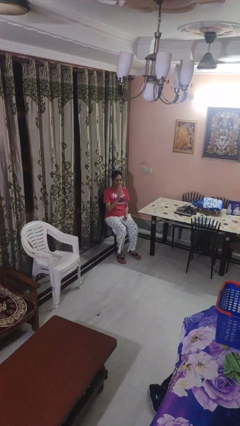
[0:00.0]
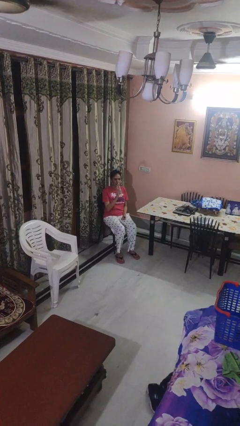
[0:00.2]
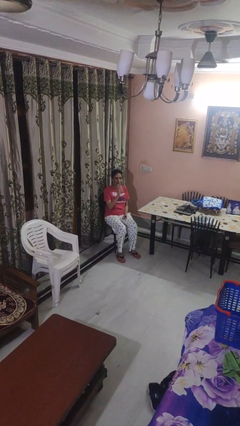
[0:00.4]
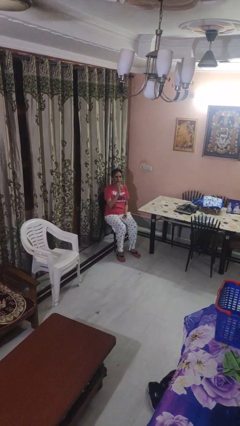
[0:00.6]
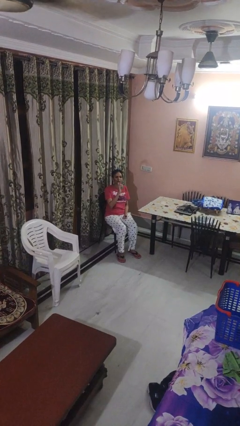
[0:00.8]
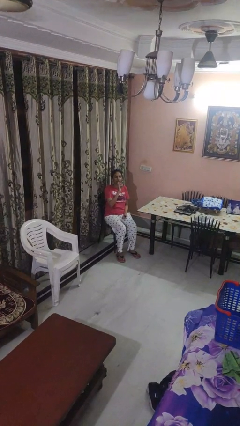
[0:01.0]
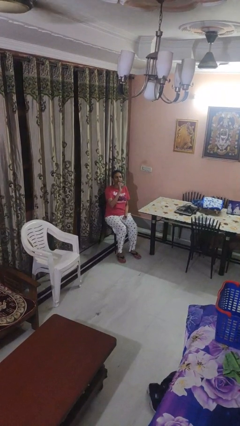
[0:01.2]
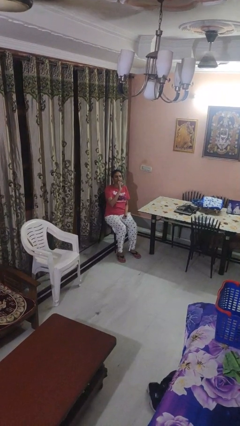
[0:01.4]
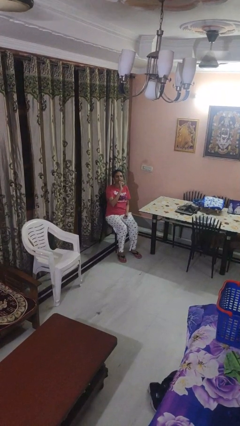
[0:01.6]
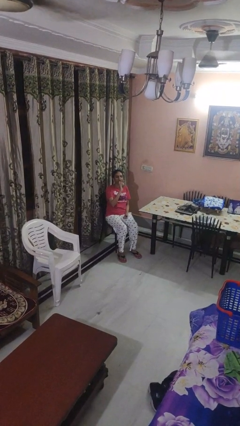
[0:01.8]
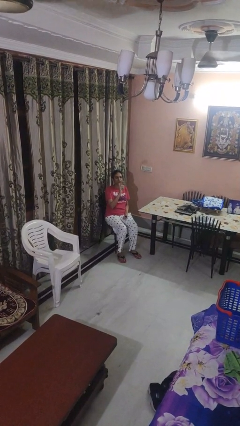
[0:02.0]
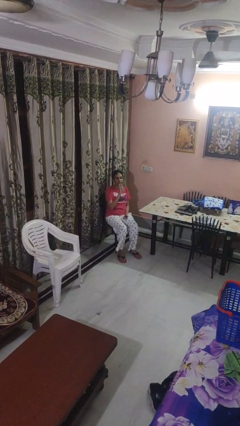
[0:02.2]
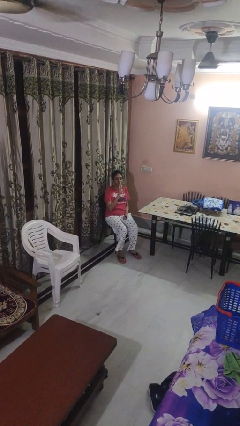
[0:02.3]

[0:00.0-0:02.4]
person drinks from bottle

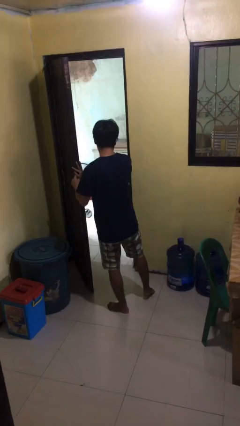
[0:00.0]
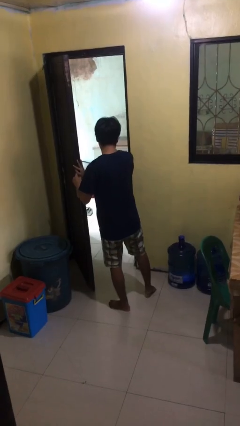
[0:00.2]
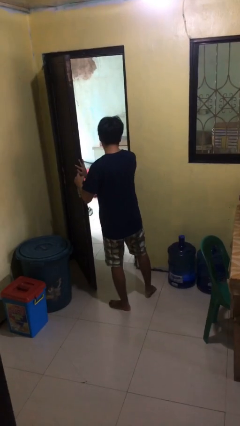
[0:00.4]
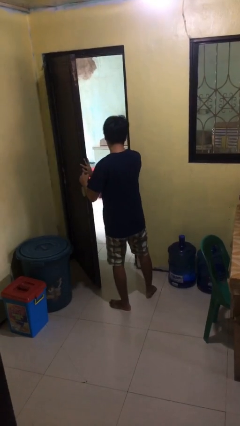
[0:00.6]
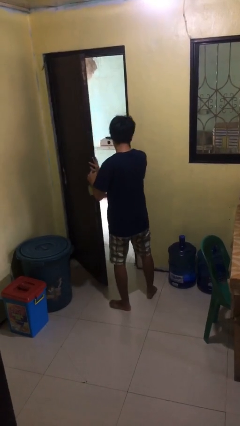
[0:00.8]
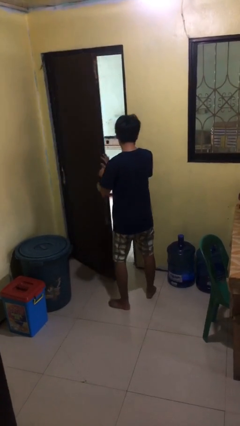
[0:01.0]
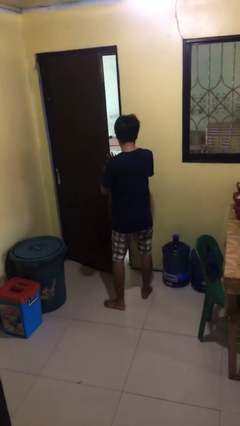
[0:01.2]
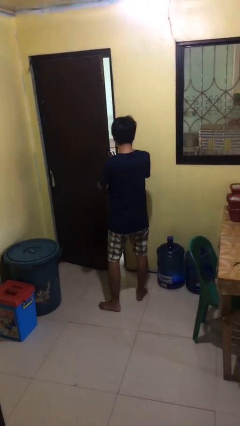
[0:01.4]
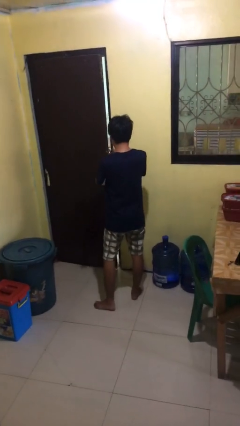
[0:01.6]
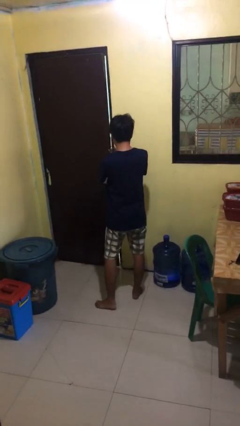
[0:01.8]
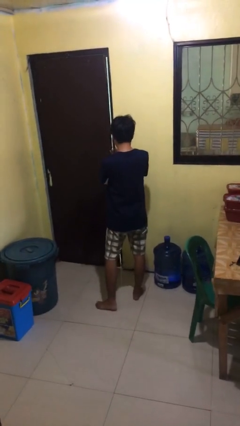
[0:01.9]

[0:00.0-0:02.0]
person closes facility door

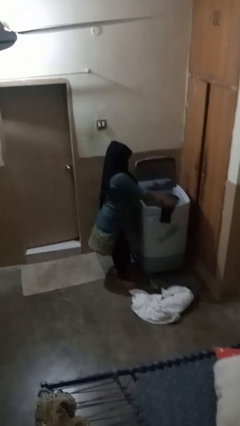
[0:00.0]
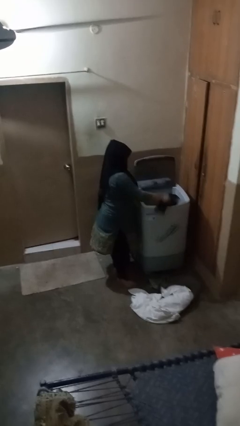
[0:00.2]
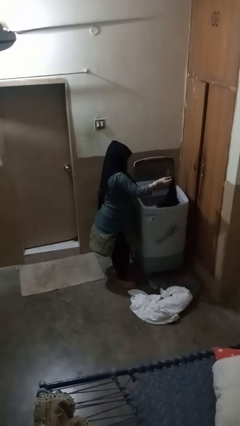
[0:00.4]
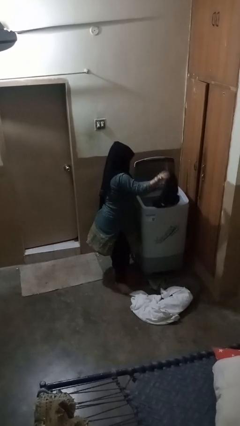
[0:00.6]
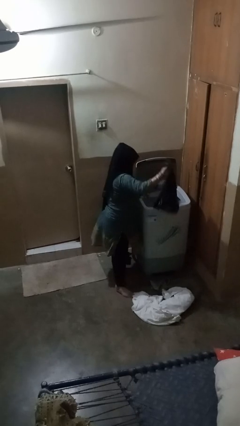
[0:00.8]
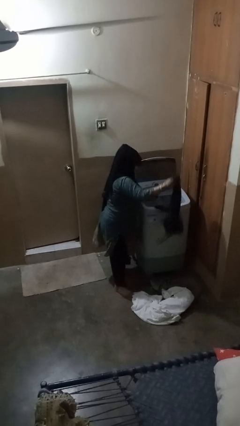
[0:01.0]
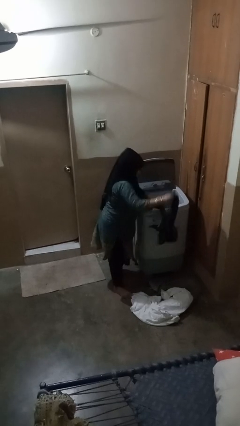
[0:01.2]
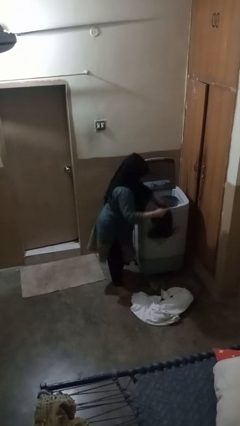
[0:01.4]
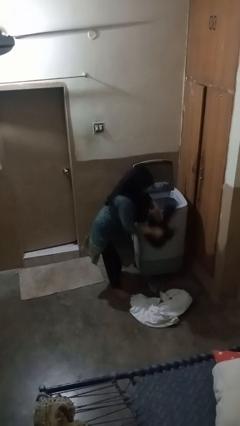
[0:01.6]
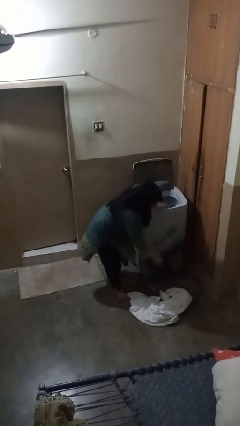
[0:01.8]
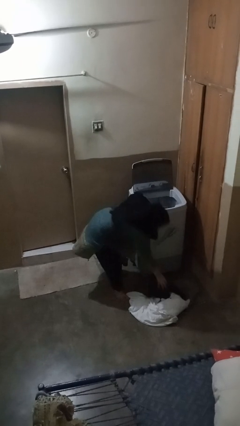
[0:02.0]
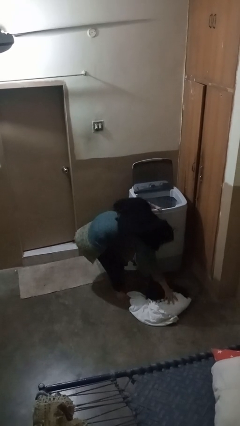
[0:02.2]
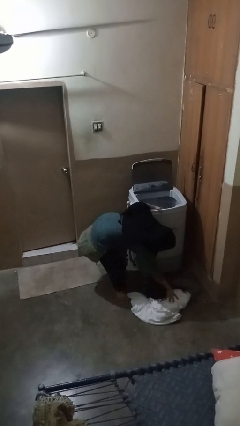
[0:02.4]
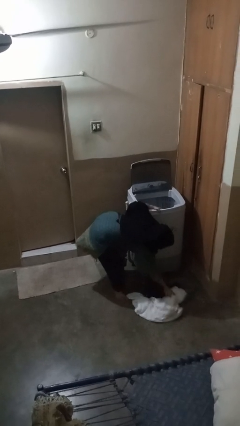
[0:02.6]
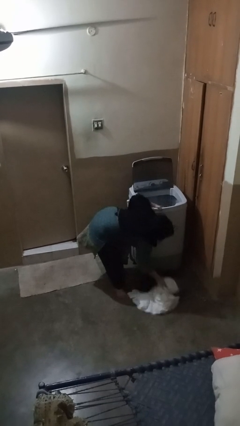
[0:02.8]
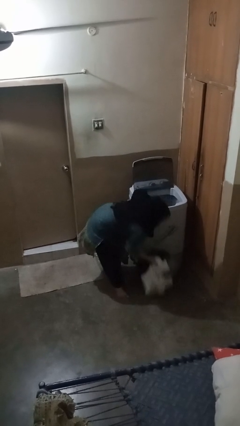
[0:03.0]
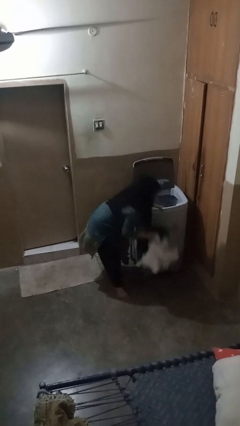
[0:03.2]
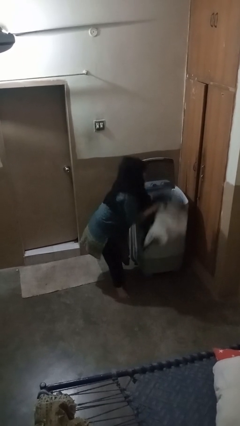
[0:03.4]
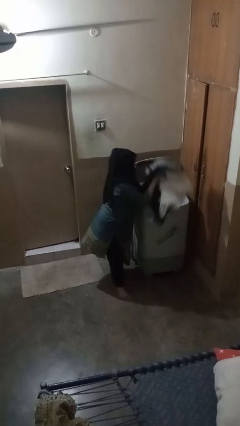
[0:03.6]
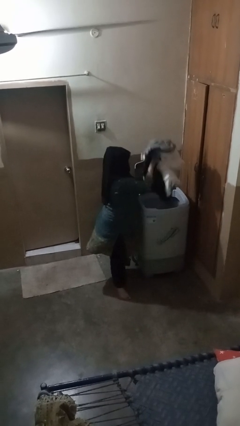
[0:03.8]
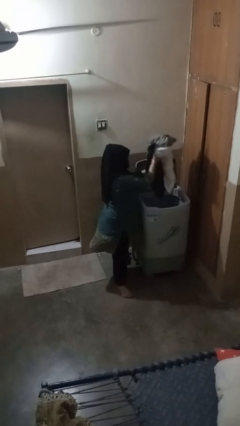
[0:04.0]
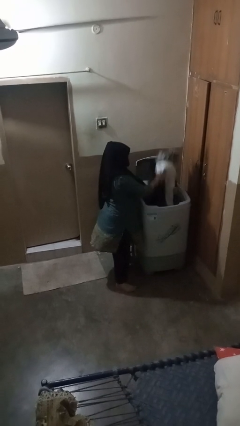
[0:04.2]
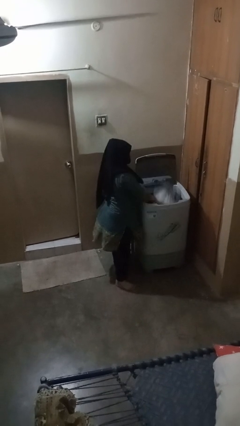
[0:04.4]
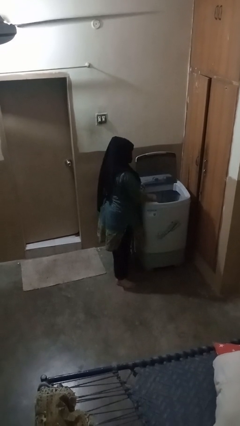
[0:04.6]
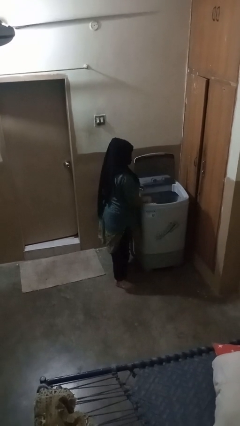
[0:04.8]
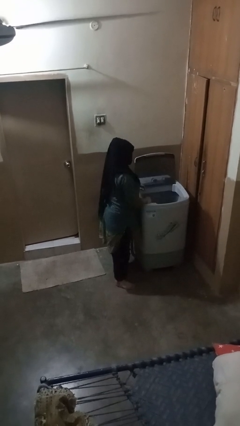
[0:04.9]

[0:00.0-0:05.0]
person loads clotheswasher

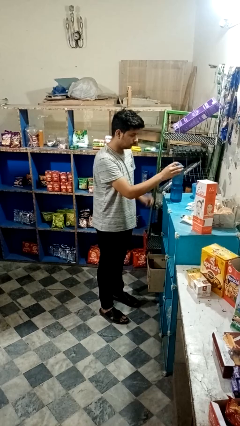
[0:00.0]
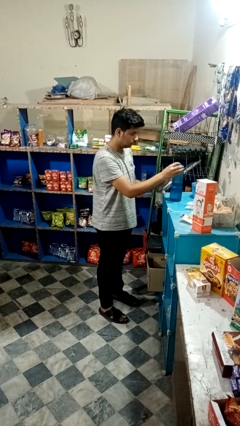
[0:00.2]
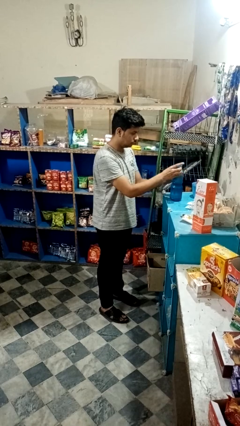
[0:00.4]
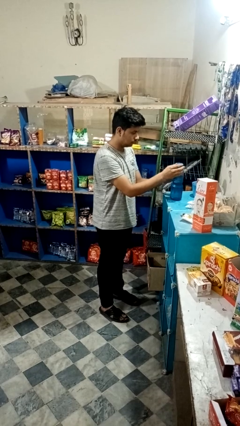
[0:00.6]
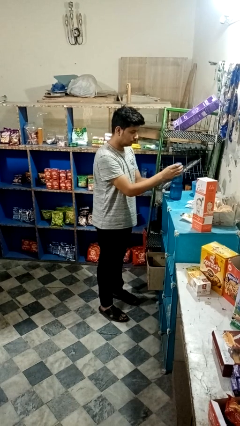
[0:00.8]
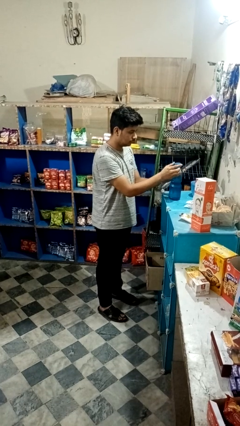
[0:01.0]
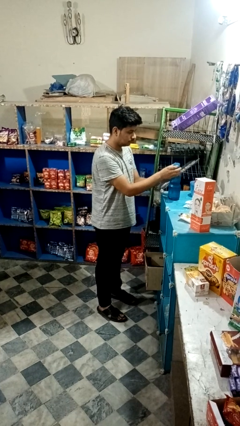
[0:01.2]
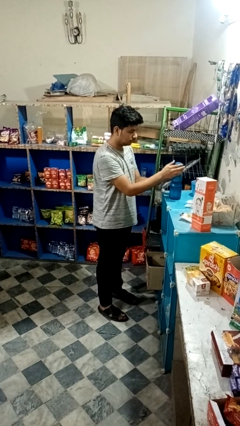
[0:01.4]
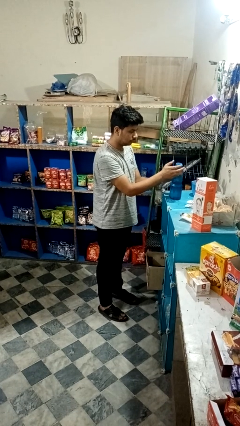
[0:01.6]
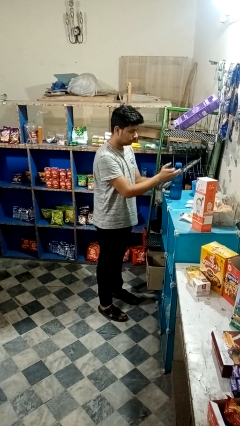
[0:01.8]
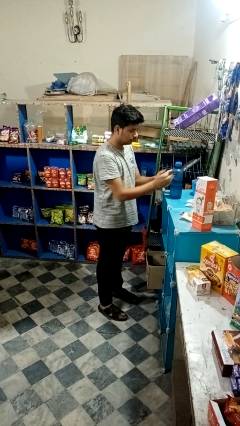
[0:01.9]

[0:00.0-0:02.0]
person screws lid to bottle

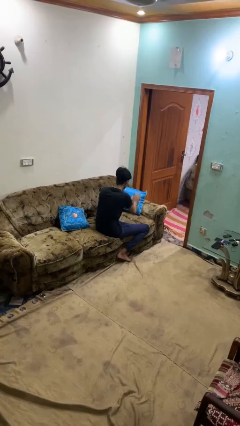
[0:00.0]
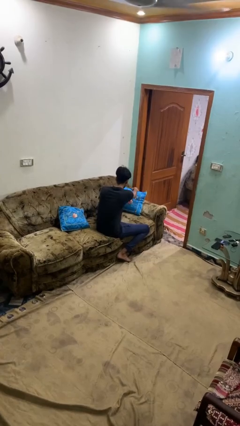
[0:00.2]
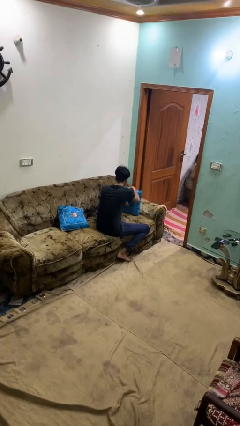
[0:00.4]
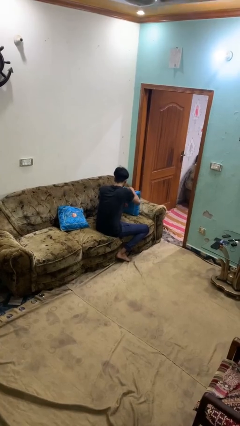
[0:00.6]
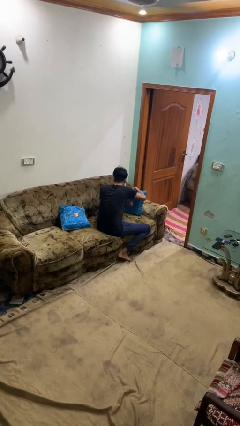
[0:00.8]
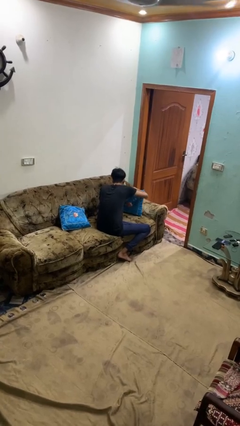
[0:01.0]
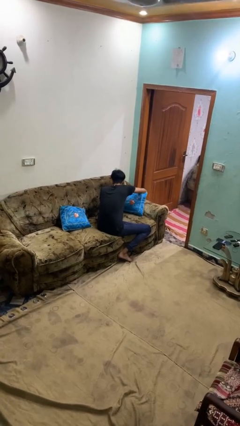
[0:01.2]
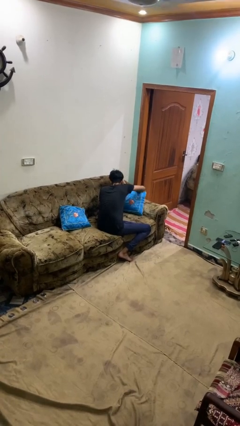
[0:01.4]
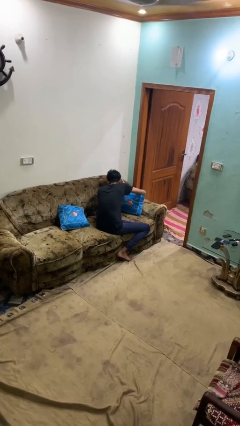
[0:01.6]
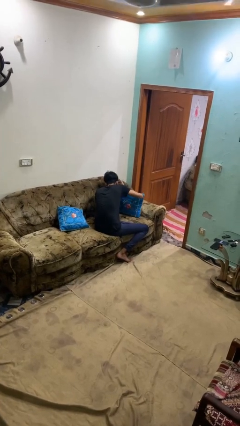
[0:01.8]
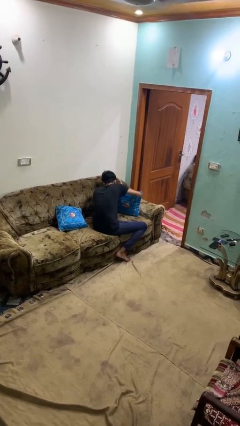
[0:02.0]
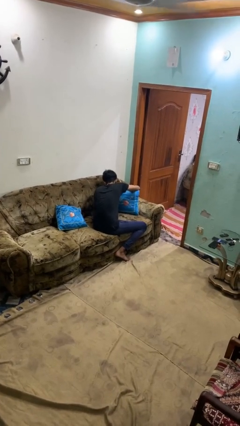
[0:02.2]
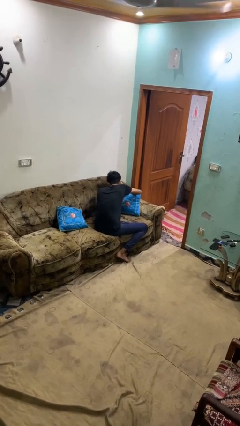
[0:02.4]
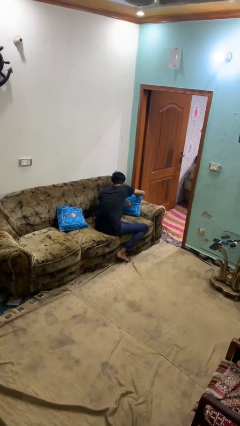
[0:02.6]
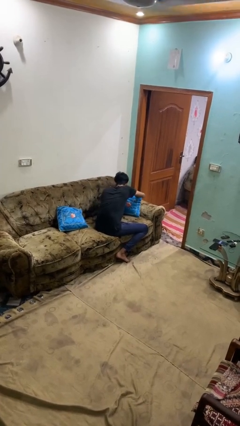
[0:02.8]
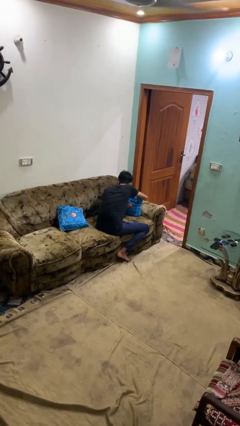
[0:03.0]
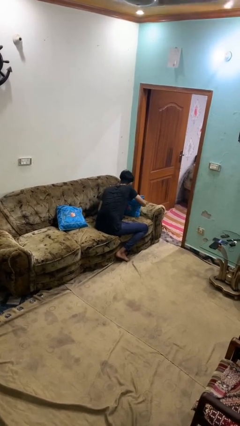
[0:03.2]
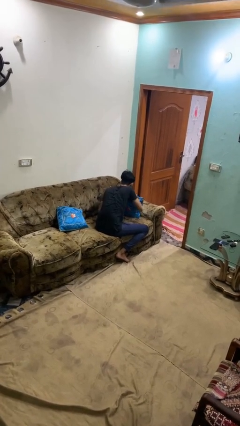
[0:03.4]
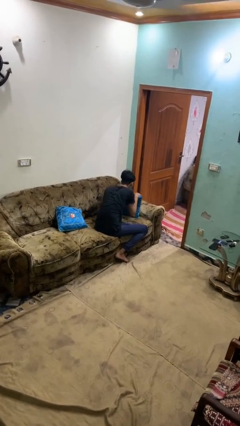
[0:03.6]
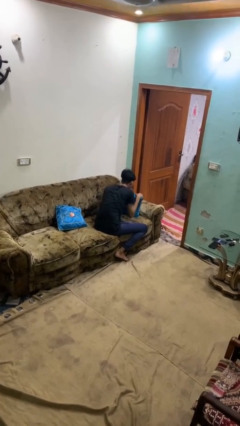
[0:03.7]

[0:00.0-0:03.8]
person searches in couch

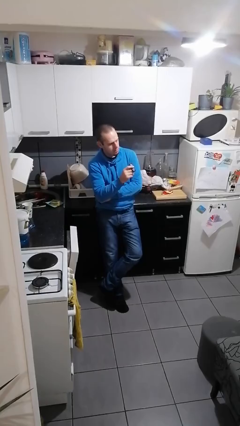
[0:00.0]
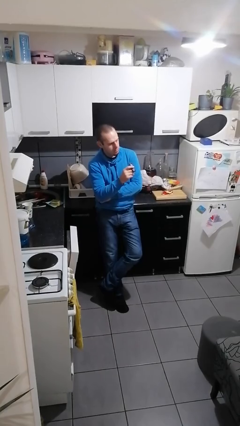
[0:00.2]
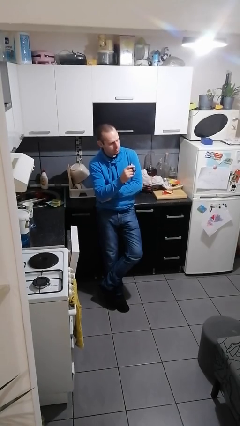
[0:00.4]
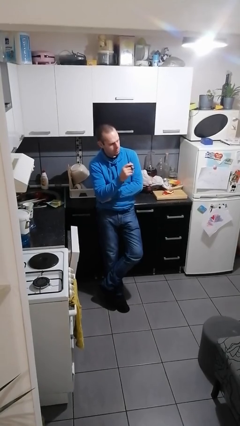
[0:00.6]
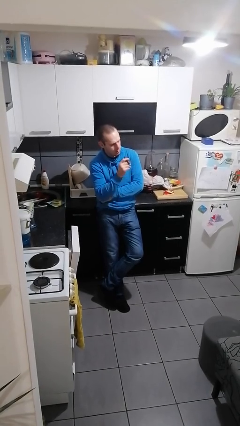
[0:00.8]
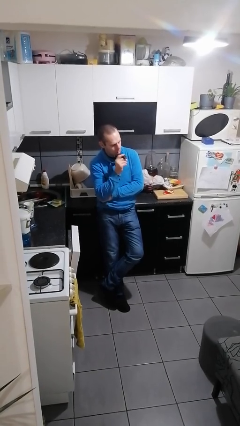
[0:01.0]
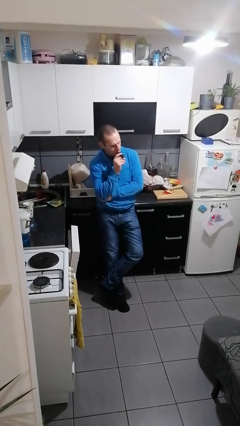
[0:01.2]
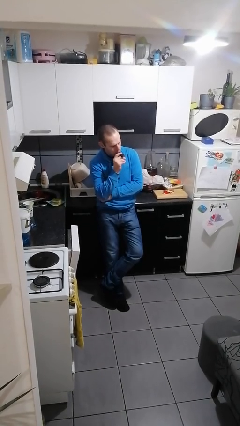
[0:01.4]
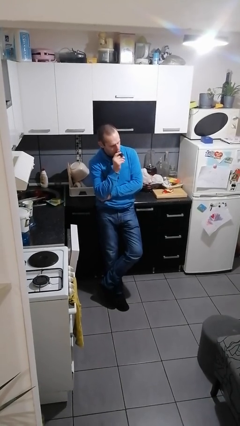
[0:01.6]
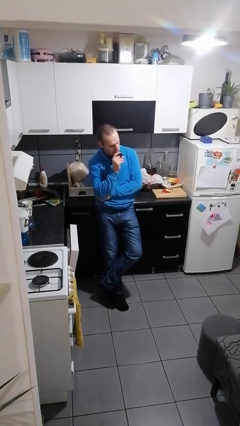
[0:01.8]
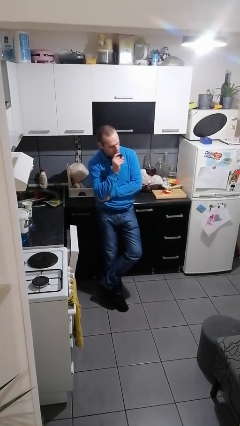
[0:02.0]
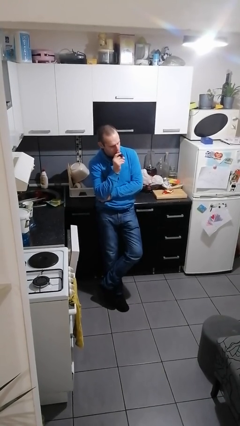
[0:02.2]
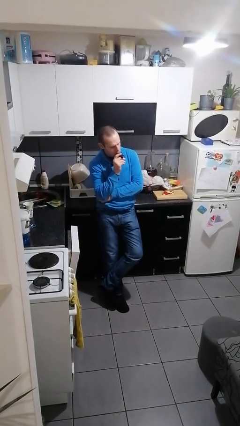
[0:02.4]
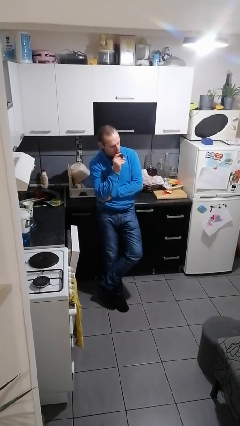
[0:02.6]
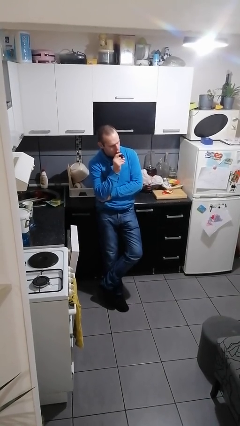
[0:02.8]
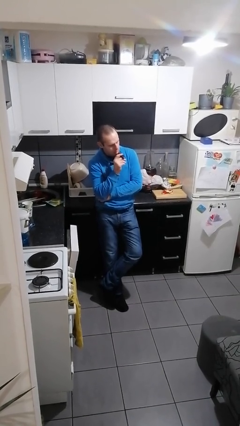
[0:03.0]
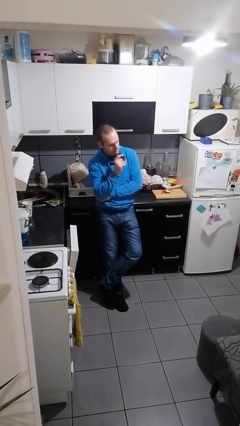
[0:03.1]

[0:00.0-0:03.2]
person vapes
